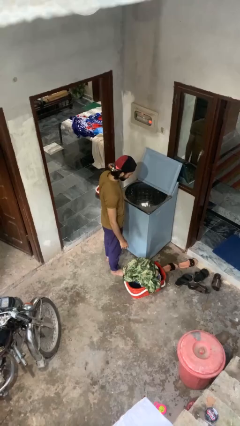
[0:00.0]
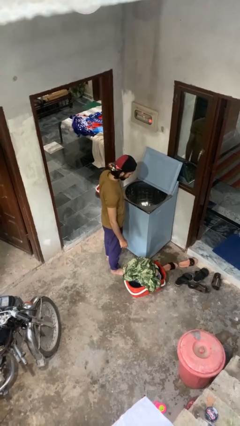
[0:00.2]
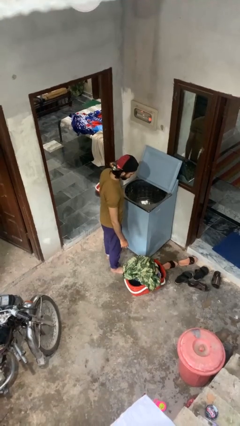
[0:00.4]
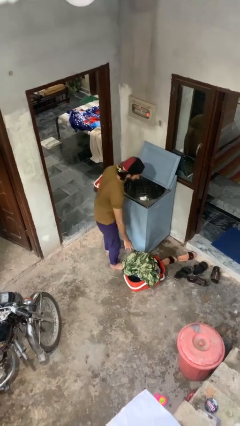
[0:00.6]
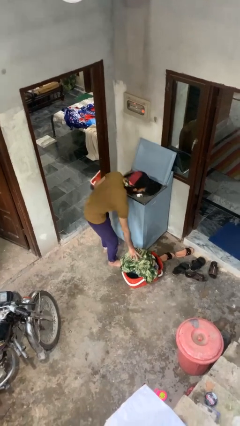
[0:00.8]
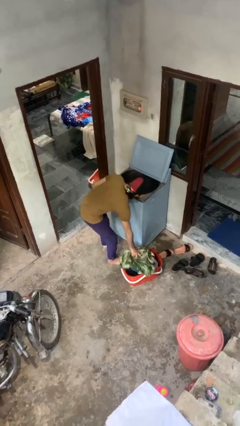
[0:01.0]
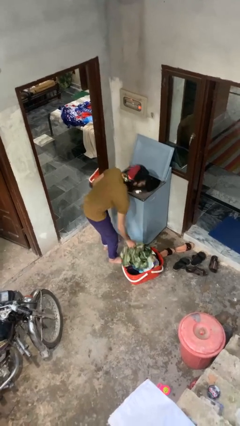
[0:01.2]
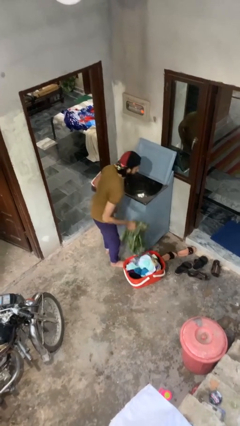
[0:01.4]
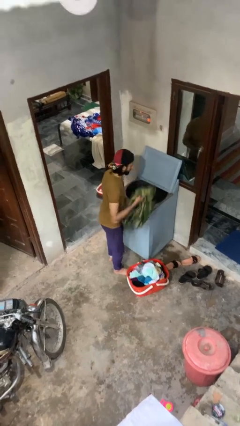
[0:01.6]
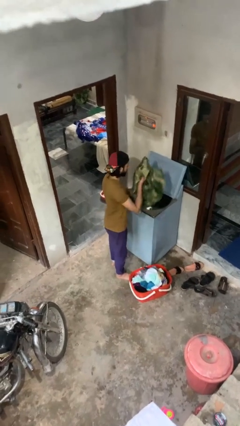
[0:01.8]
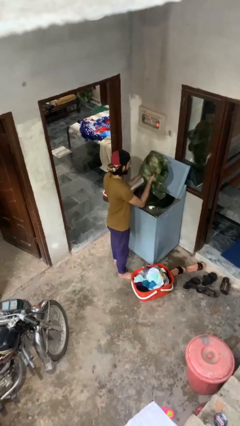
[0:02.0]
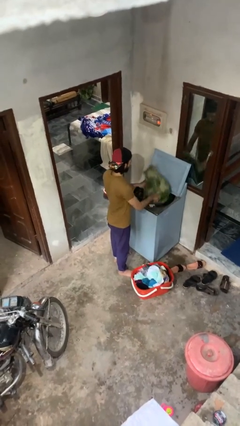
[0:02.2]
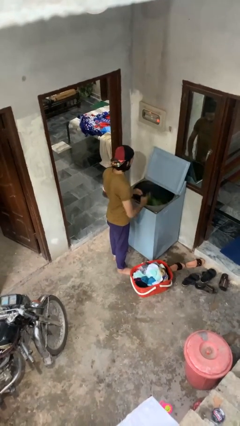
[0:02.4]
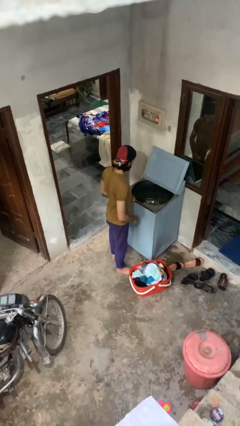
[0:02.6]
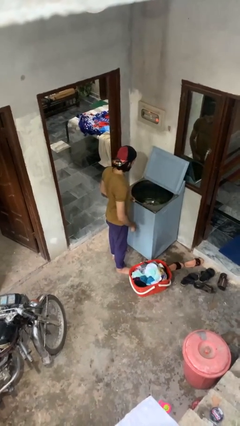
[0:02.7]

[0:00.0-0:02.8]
person loads clotheswasher

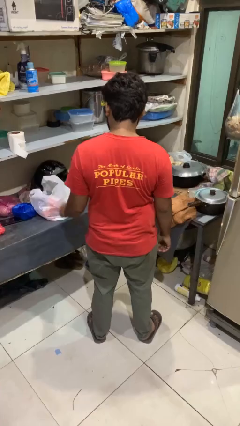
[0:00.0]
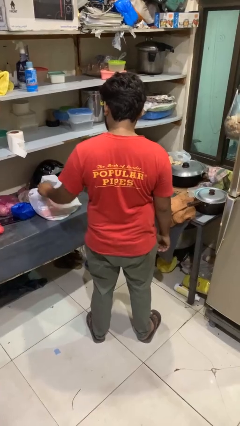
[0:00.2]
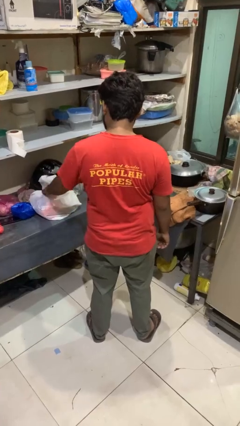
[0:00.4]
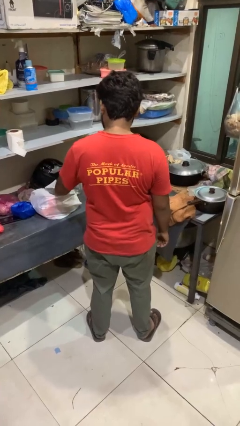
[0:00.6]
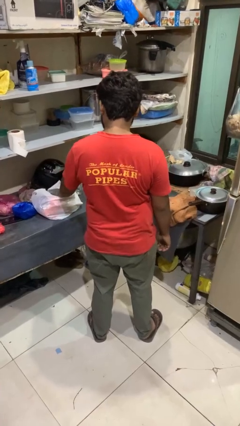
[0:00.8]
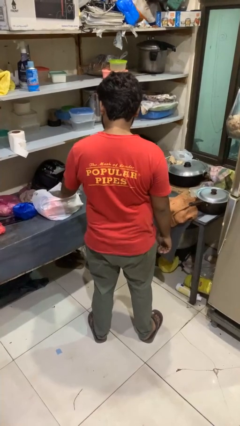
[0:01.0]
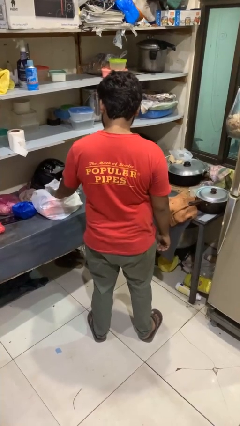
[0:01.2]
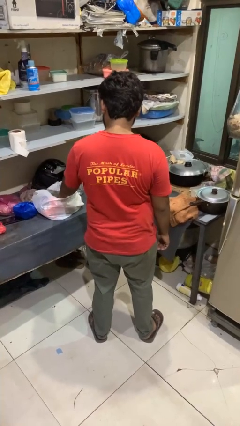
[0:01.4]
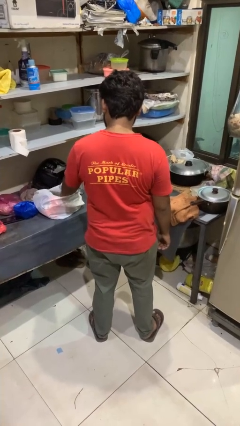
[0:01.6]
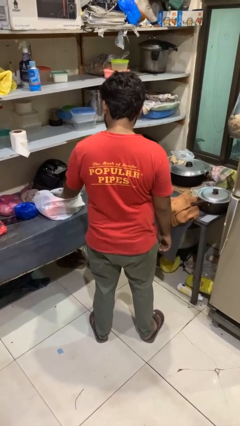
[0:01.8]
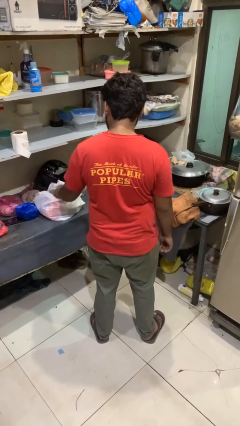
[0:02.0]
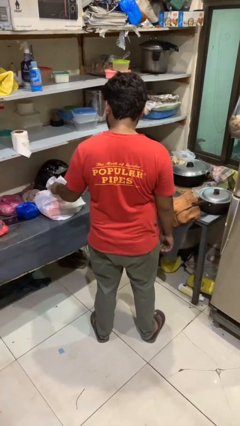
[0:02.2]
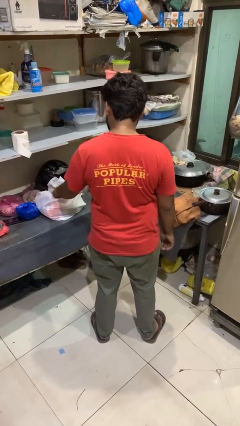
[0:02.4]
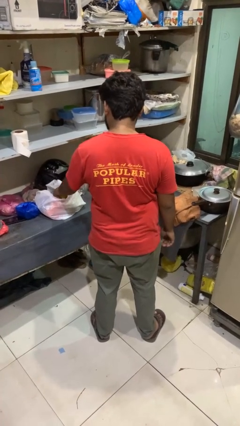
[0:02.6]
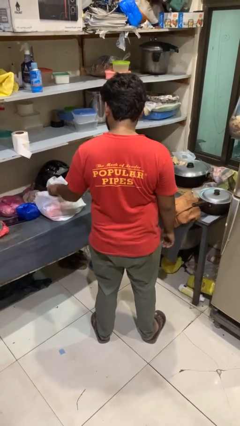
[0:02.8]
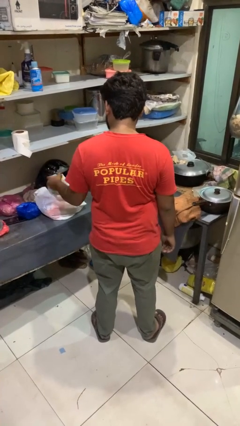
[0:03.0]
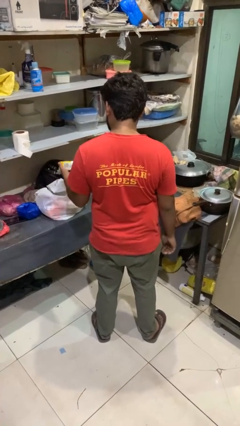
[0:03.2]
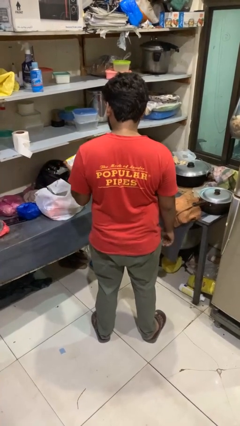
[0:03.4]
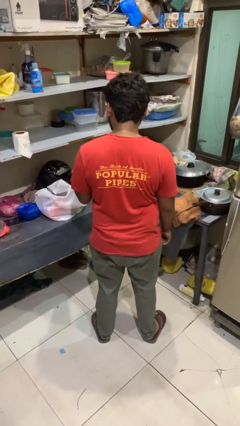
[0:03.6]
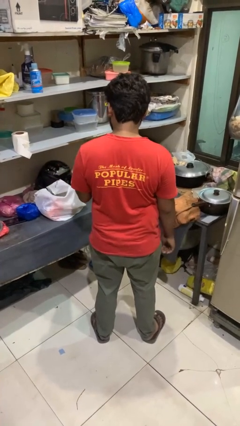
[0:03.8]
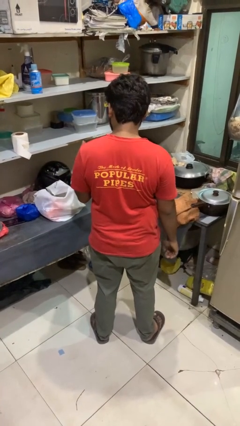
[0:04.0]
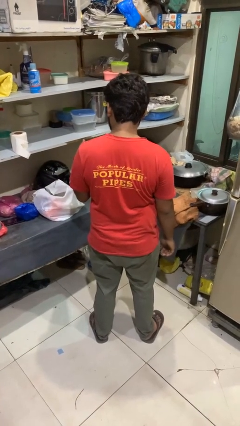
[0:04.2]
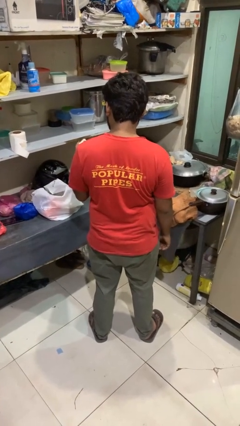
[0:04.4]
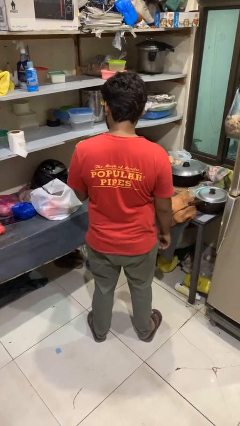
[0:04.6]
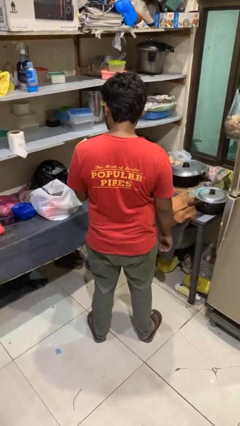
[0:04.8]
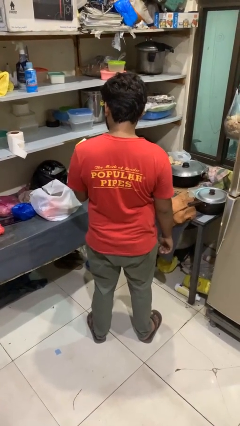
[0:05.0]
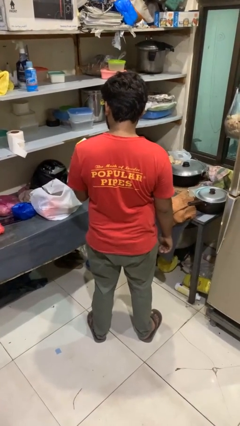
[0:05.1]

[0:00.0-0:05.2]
person takes object from bag

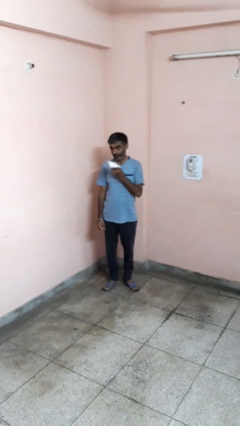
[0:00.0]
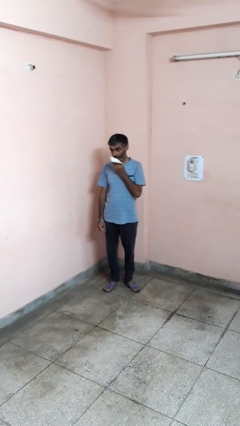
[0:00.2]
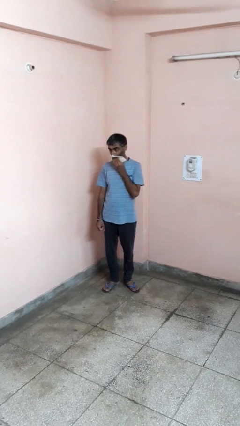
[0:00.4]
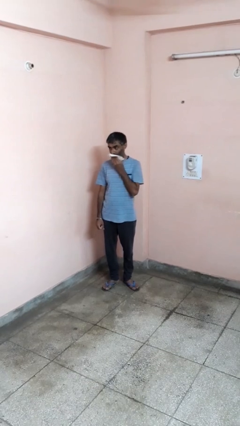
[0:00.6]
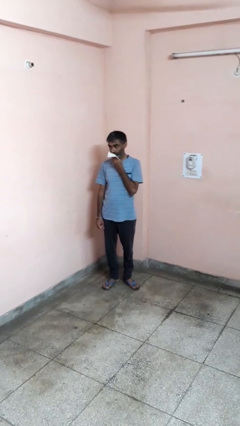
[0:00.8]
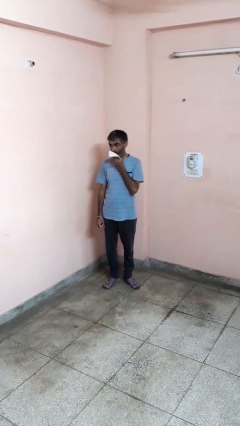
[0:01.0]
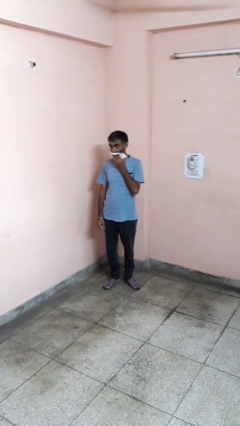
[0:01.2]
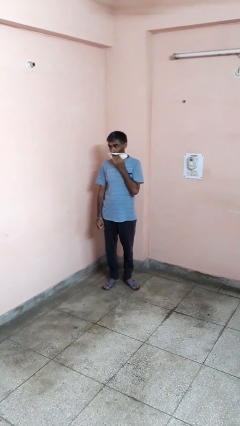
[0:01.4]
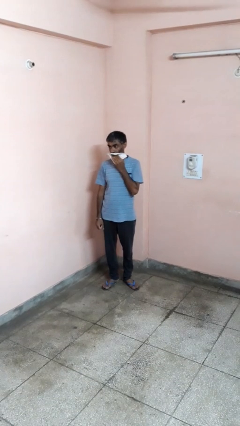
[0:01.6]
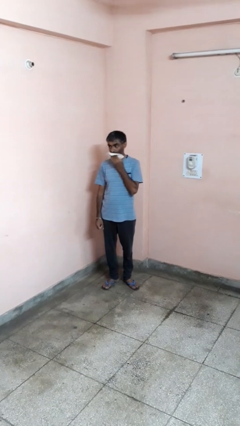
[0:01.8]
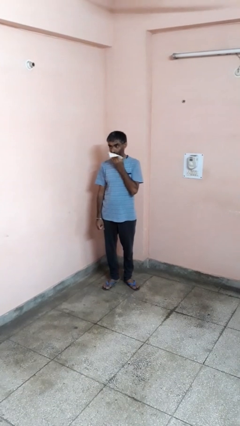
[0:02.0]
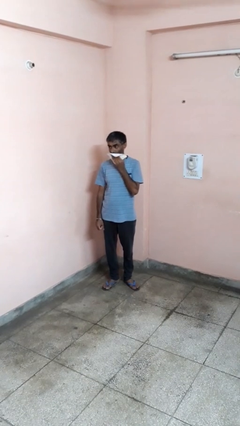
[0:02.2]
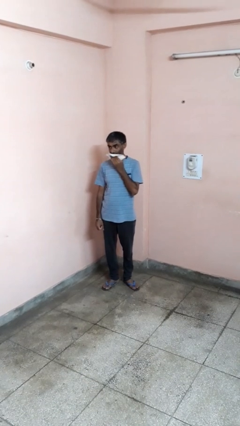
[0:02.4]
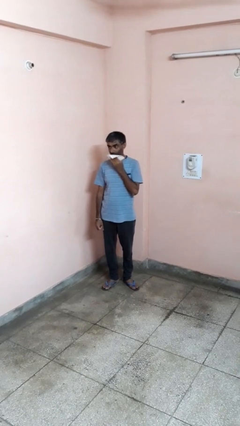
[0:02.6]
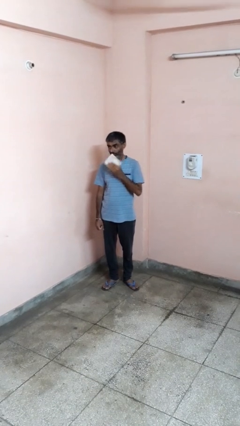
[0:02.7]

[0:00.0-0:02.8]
person wipes mouth with napkin

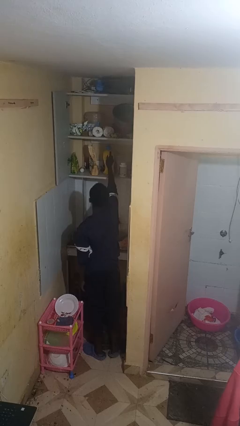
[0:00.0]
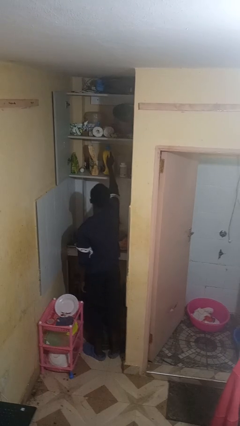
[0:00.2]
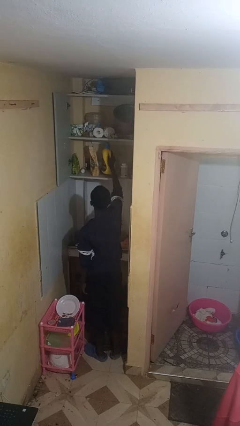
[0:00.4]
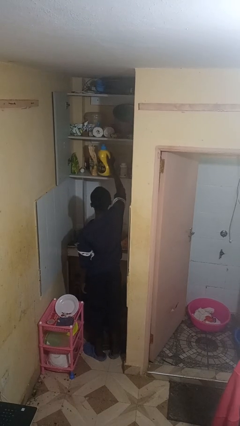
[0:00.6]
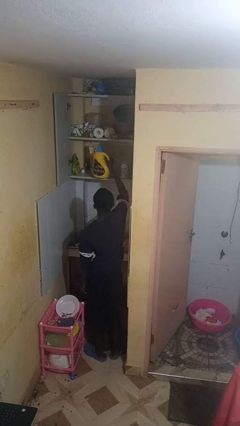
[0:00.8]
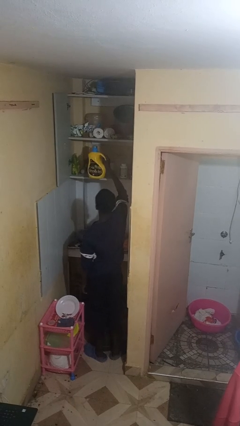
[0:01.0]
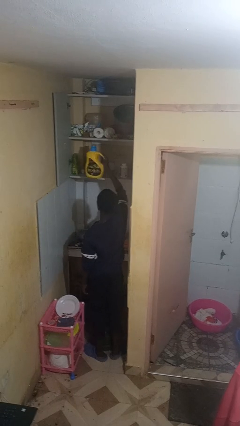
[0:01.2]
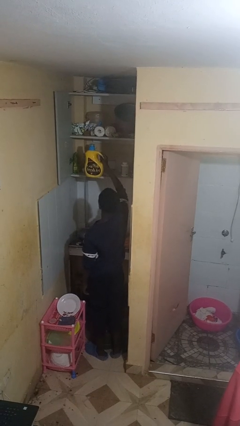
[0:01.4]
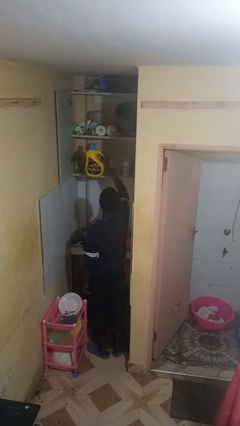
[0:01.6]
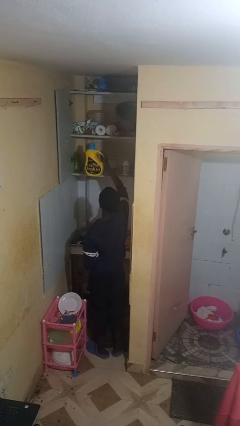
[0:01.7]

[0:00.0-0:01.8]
person takes object from cabinet

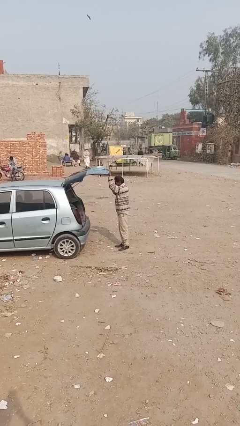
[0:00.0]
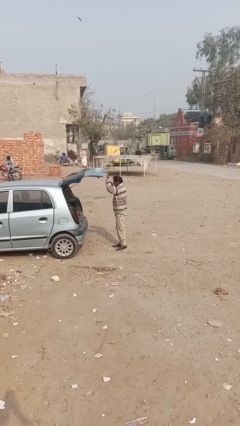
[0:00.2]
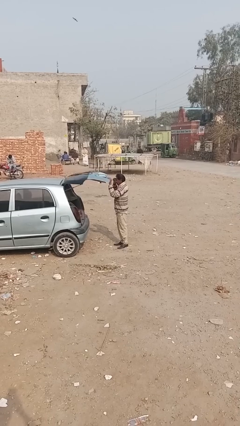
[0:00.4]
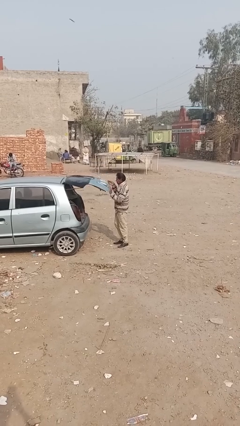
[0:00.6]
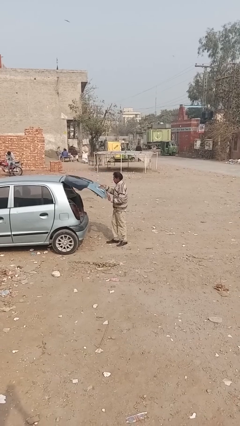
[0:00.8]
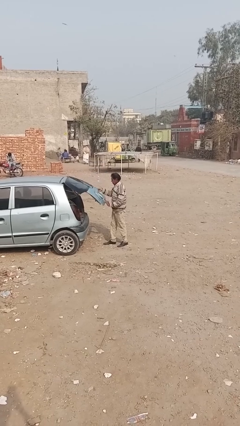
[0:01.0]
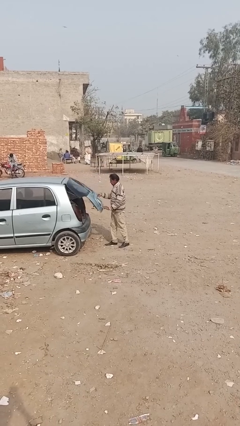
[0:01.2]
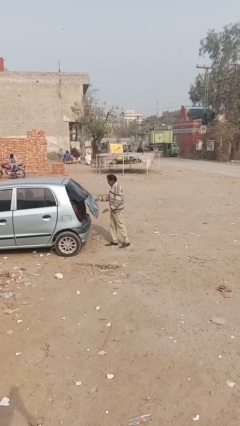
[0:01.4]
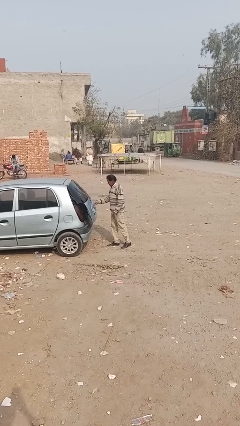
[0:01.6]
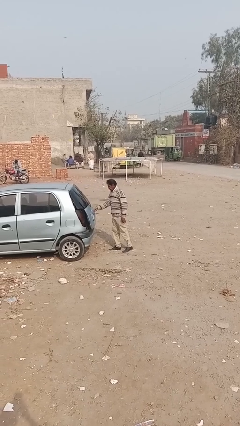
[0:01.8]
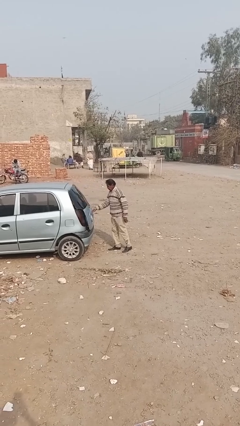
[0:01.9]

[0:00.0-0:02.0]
person closes car trunk

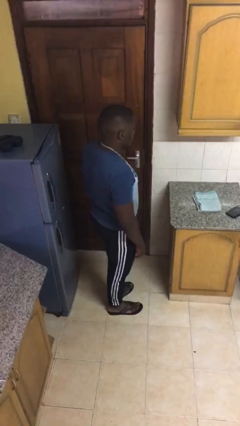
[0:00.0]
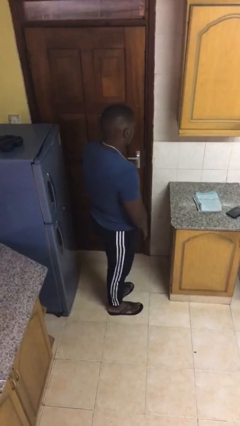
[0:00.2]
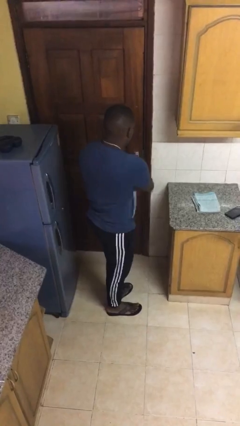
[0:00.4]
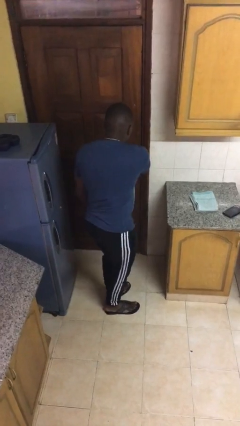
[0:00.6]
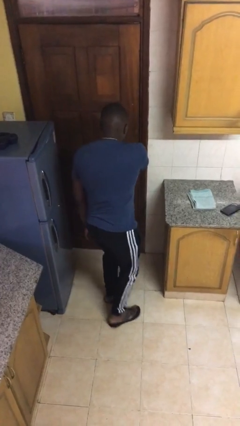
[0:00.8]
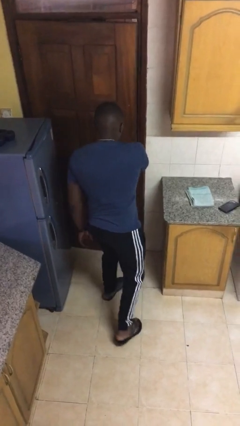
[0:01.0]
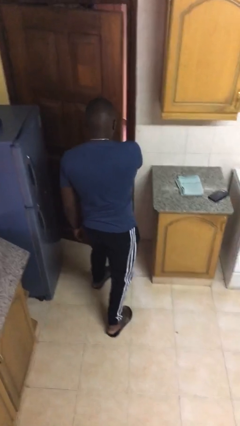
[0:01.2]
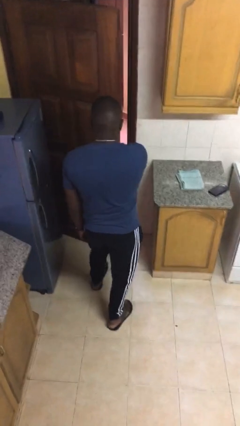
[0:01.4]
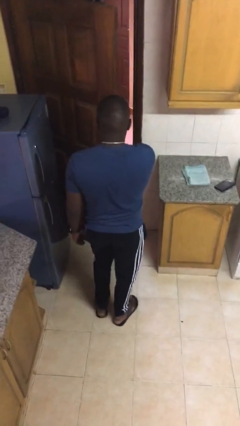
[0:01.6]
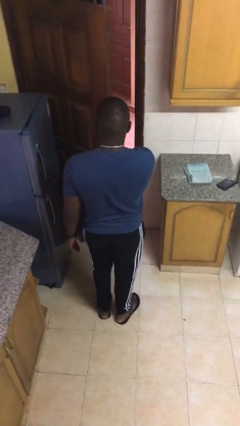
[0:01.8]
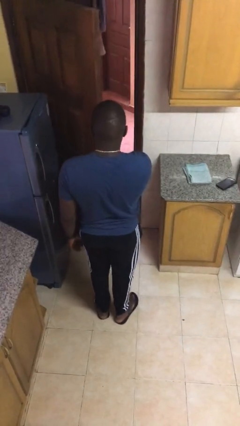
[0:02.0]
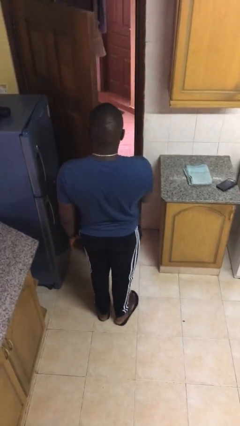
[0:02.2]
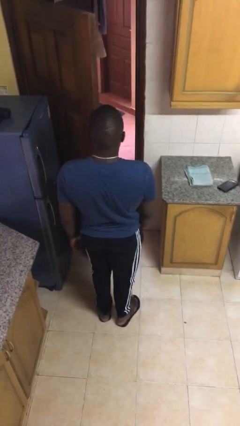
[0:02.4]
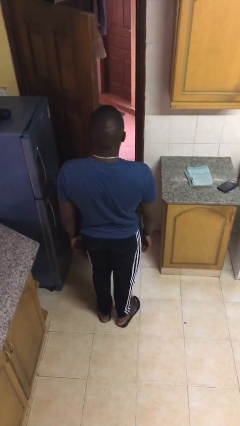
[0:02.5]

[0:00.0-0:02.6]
person opens facility door
